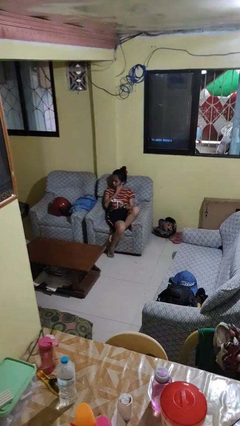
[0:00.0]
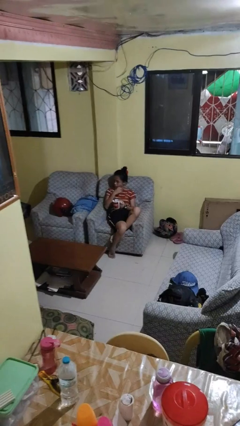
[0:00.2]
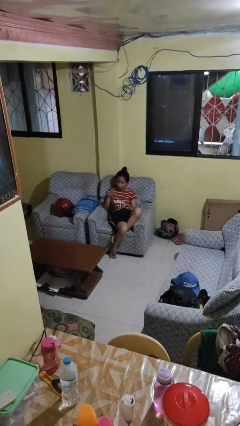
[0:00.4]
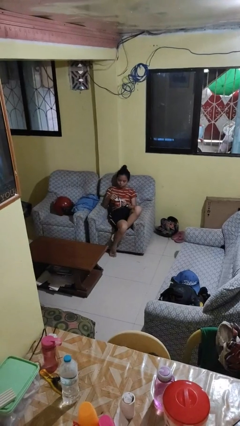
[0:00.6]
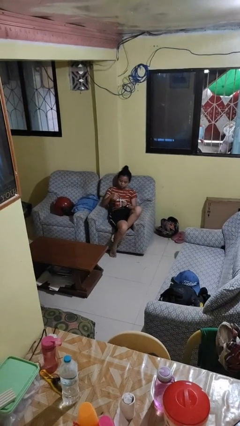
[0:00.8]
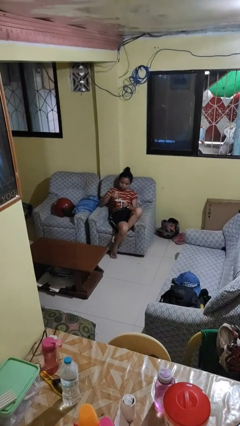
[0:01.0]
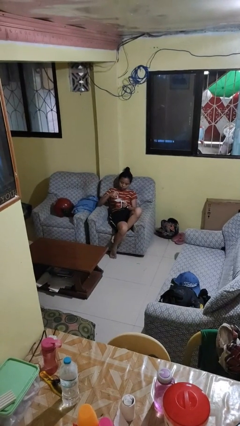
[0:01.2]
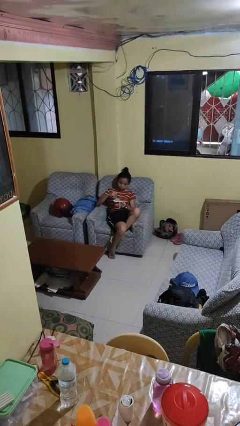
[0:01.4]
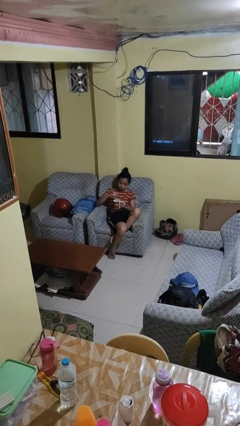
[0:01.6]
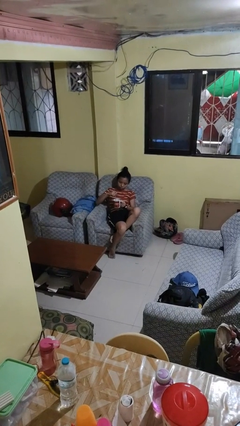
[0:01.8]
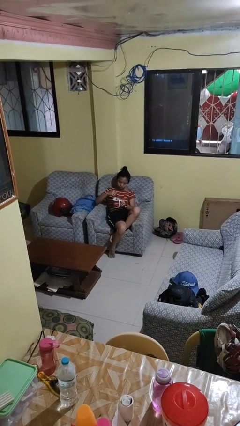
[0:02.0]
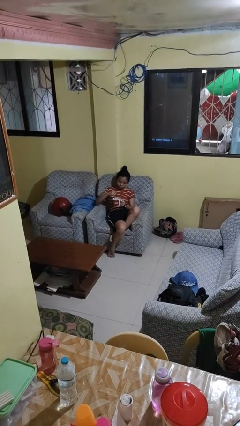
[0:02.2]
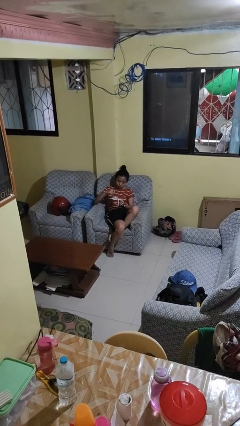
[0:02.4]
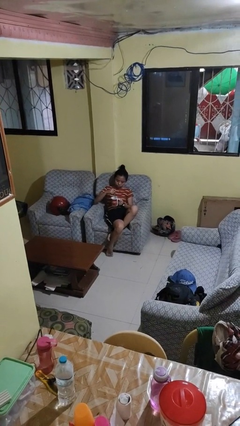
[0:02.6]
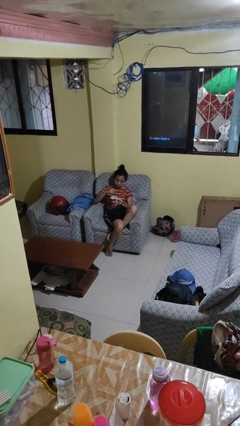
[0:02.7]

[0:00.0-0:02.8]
person stirs mug

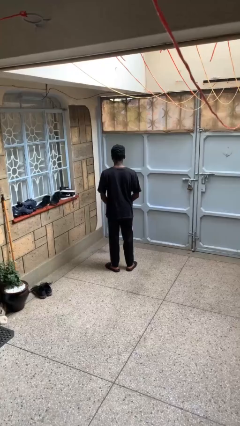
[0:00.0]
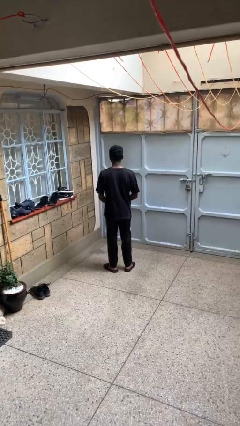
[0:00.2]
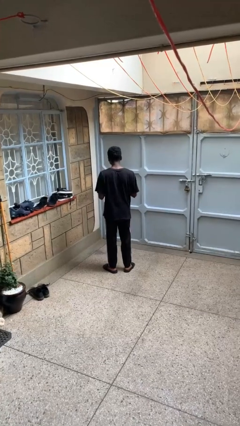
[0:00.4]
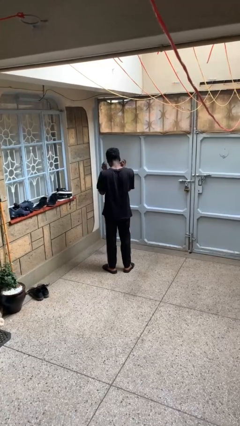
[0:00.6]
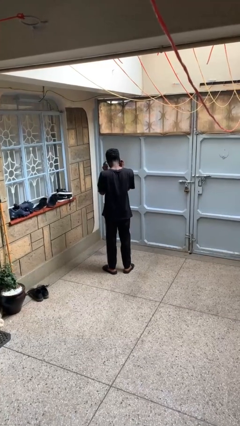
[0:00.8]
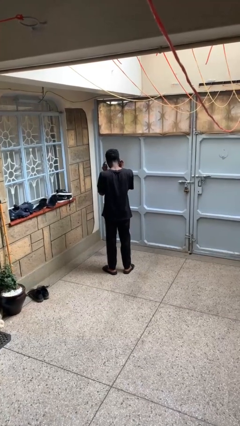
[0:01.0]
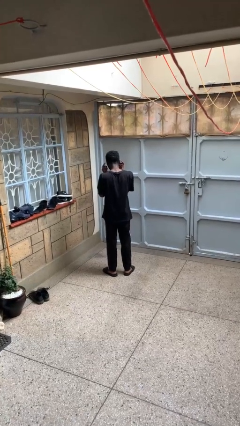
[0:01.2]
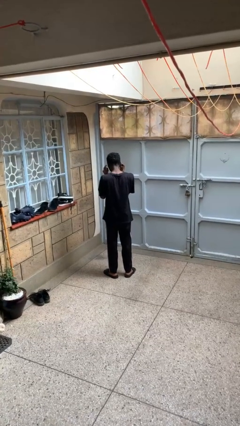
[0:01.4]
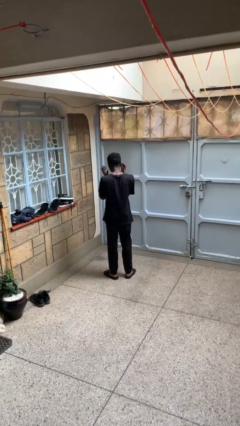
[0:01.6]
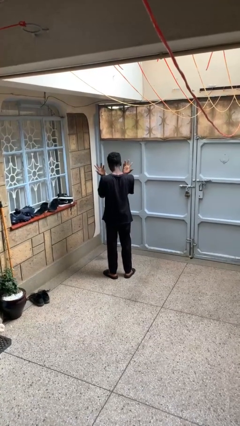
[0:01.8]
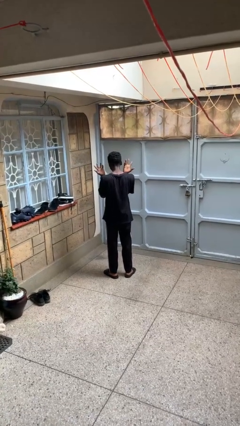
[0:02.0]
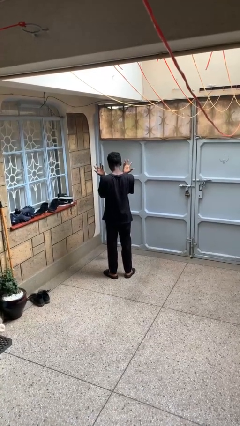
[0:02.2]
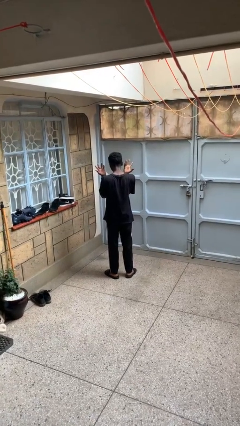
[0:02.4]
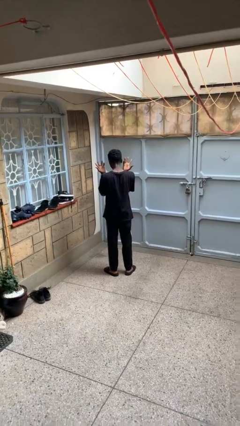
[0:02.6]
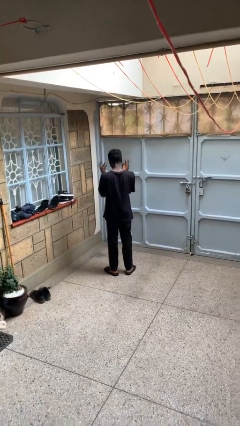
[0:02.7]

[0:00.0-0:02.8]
person puts fingers in ear

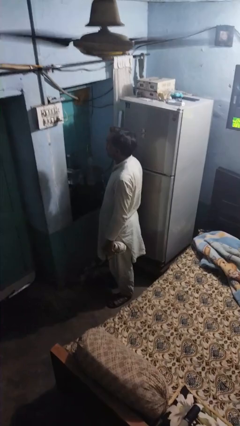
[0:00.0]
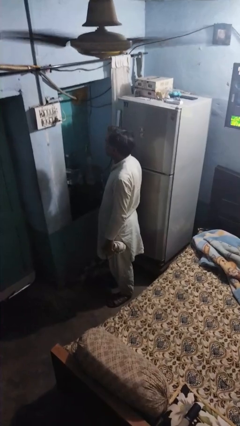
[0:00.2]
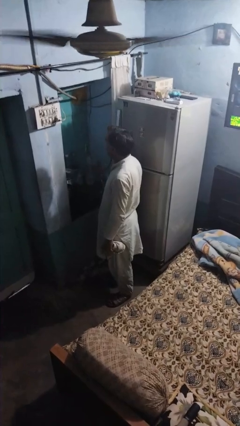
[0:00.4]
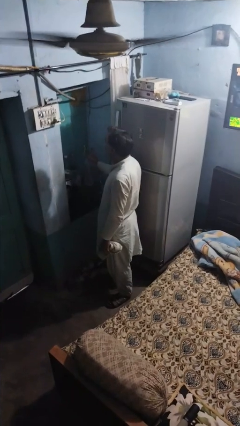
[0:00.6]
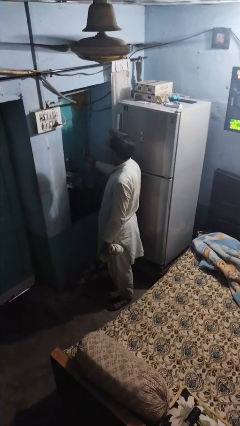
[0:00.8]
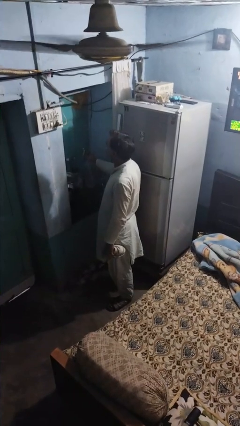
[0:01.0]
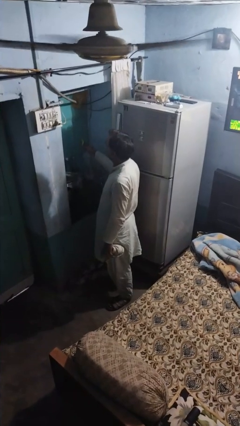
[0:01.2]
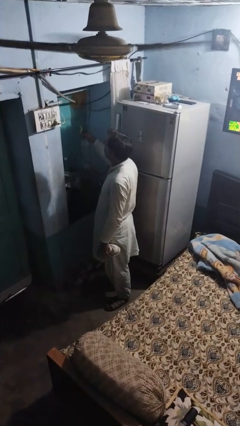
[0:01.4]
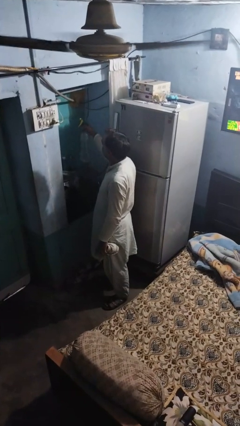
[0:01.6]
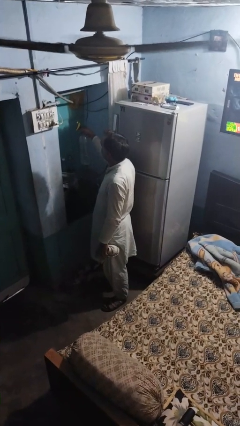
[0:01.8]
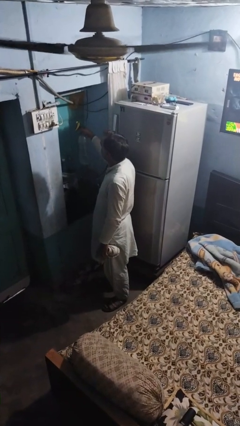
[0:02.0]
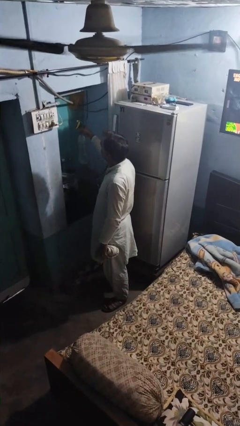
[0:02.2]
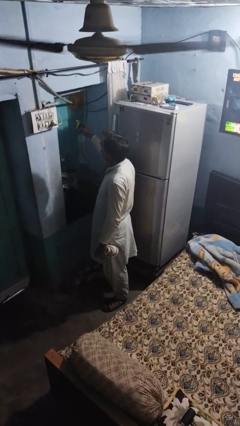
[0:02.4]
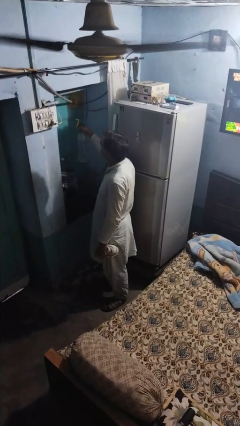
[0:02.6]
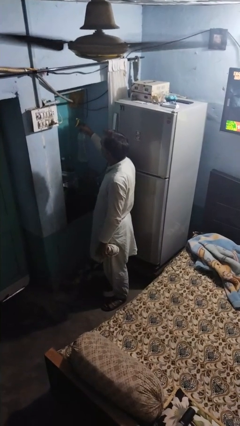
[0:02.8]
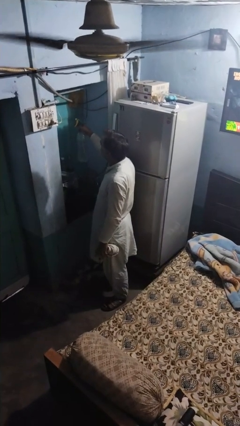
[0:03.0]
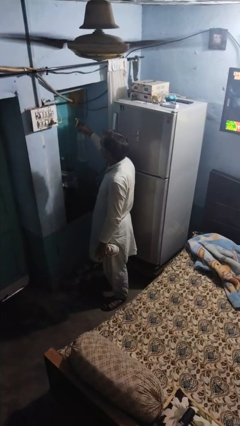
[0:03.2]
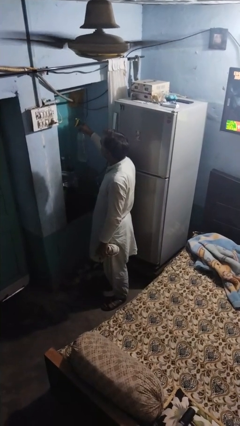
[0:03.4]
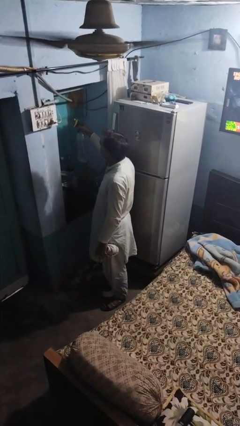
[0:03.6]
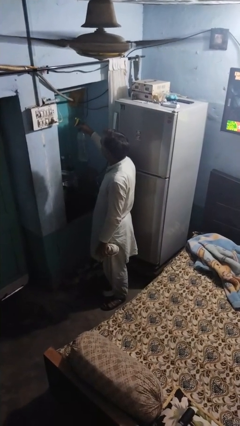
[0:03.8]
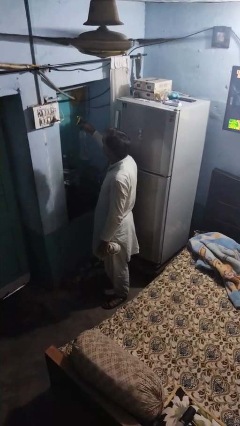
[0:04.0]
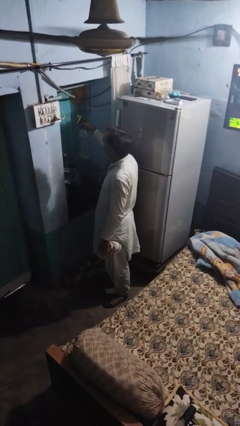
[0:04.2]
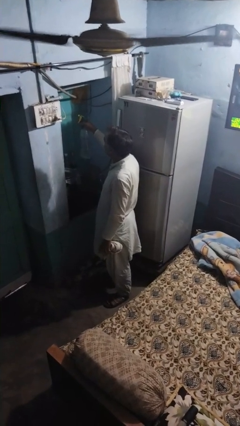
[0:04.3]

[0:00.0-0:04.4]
person sprays from bottle

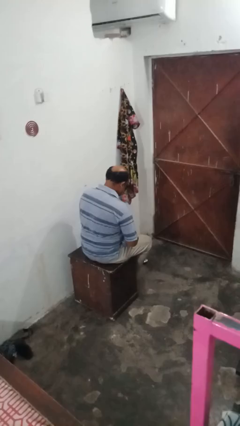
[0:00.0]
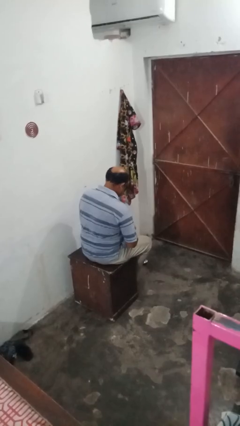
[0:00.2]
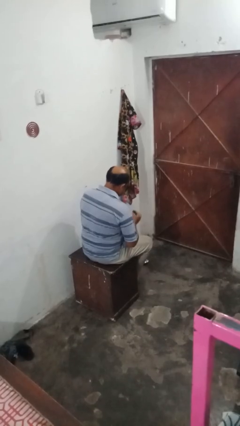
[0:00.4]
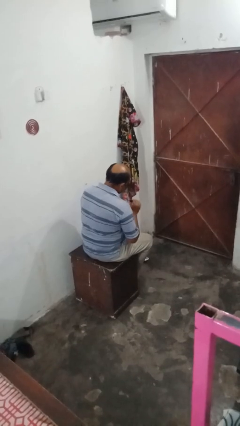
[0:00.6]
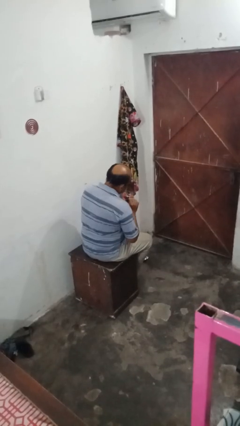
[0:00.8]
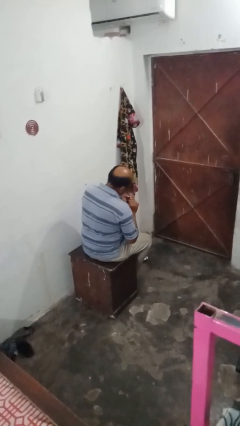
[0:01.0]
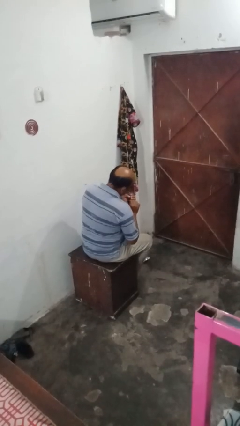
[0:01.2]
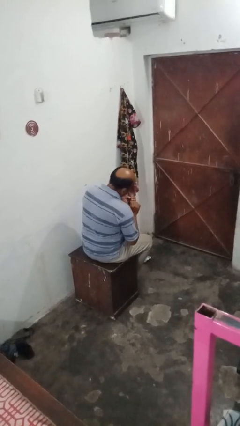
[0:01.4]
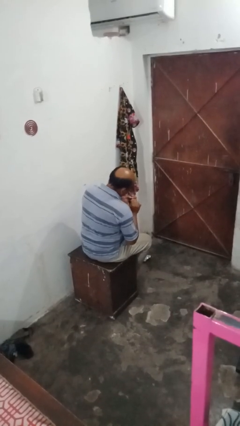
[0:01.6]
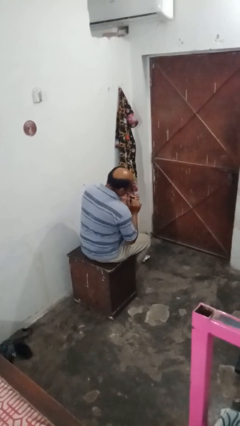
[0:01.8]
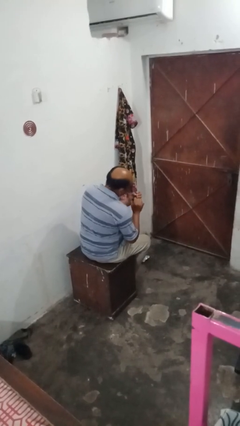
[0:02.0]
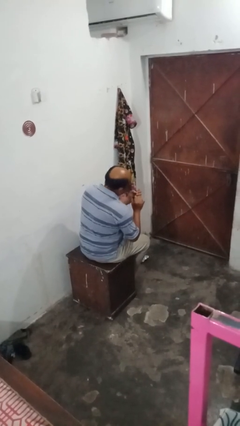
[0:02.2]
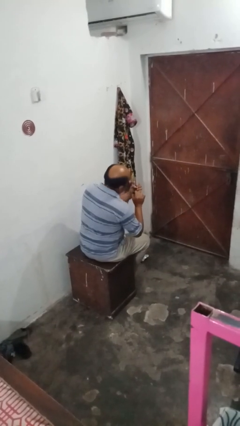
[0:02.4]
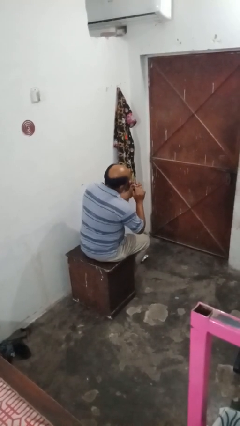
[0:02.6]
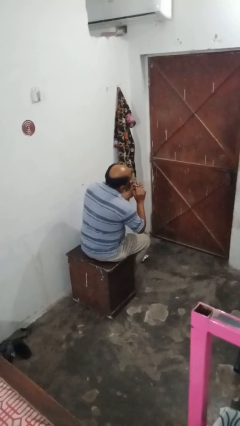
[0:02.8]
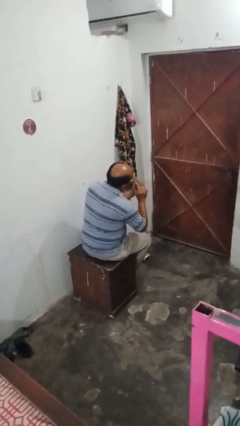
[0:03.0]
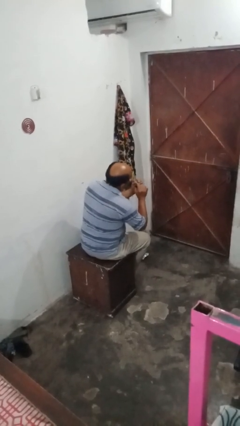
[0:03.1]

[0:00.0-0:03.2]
person paints fingernails

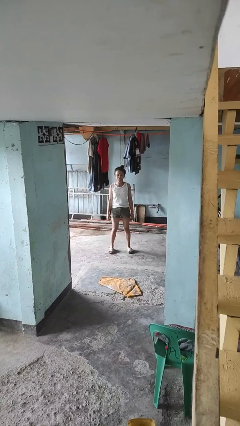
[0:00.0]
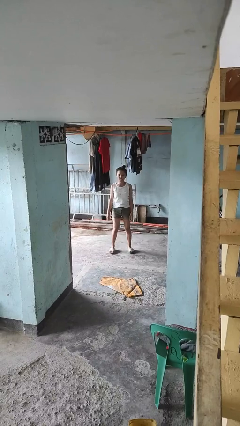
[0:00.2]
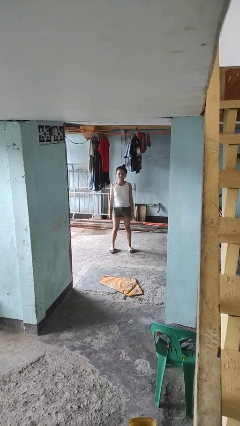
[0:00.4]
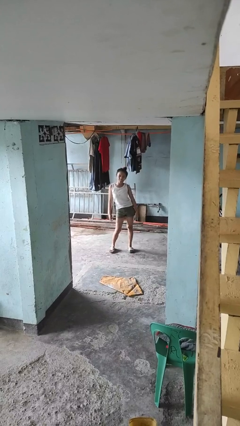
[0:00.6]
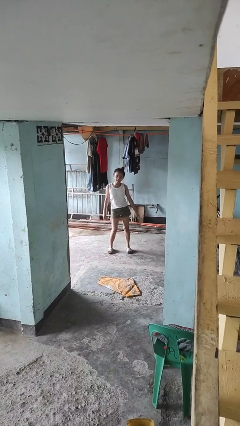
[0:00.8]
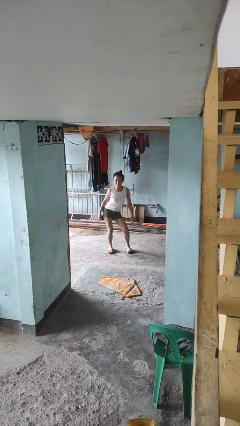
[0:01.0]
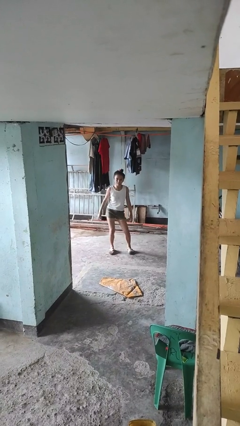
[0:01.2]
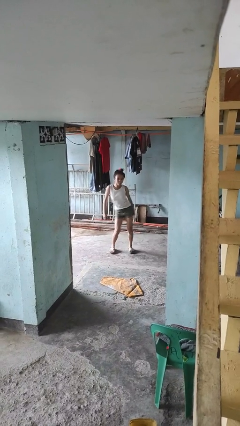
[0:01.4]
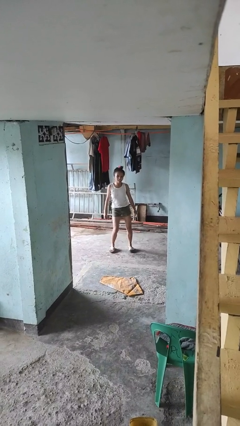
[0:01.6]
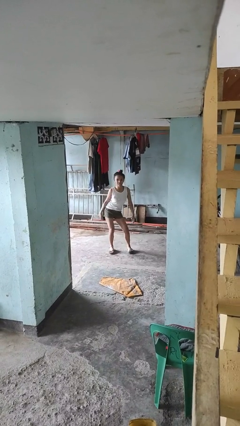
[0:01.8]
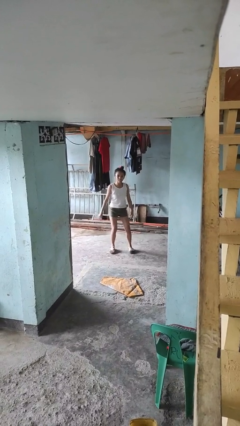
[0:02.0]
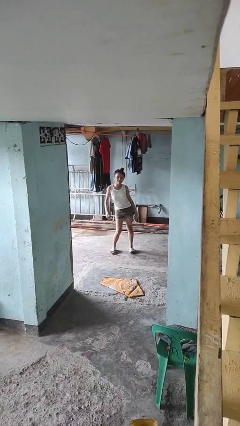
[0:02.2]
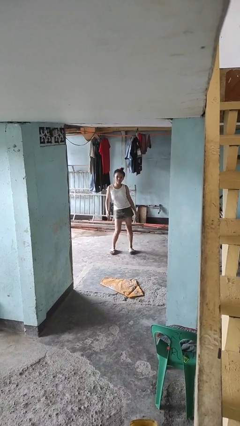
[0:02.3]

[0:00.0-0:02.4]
person wiggles hips

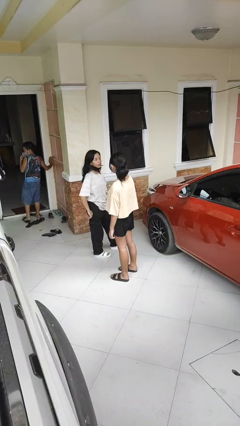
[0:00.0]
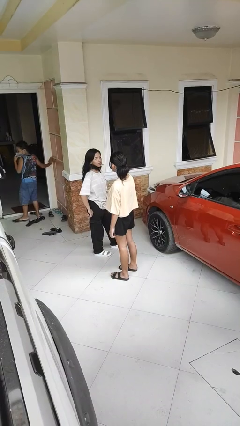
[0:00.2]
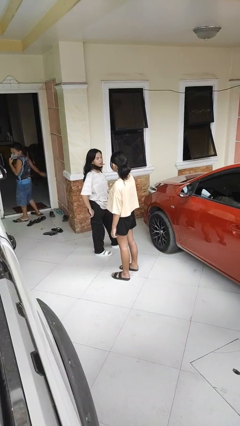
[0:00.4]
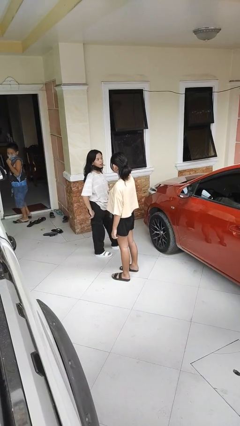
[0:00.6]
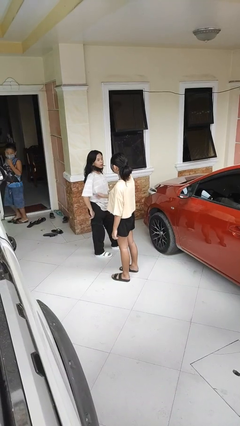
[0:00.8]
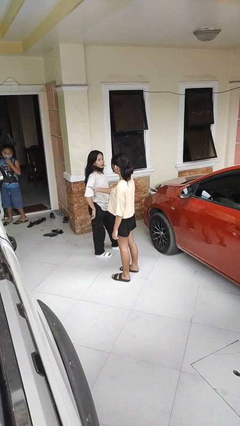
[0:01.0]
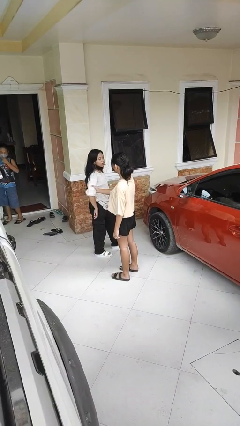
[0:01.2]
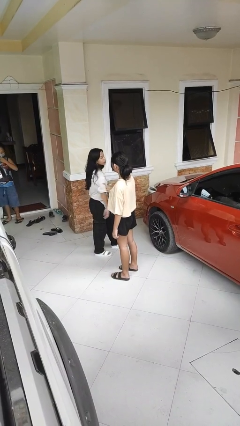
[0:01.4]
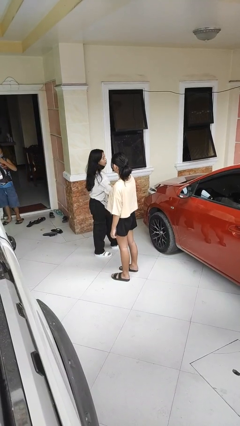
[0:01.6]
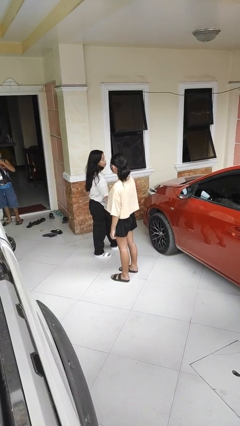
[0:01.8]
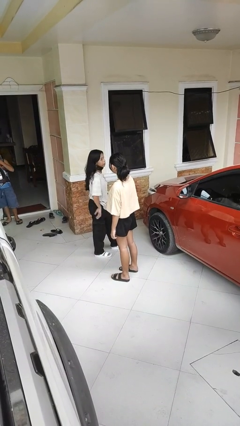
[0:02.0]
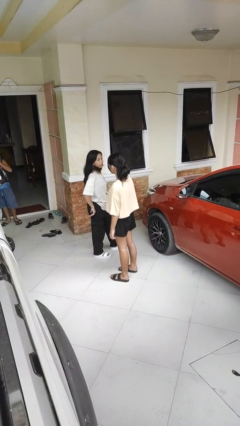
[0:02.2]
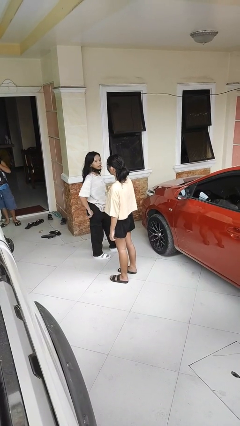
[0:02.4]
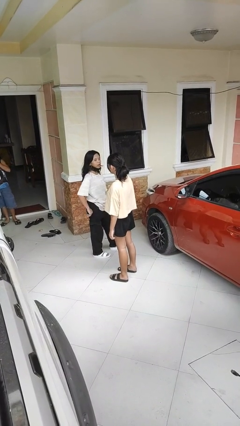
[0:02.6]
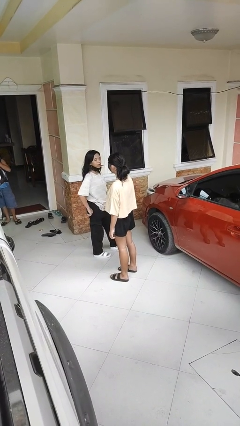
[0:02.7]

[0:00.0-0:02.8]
person grabs person by bicep
